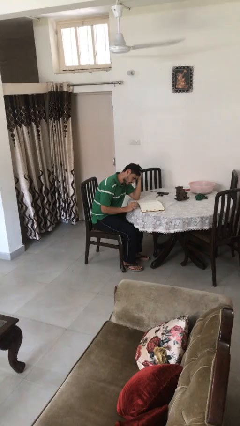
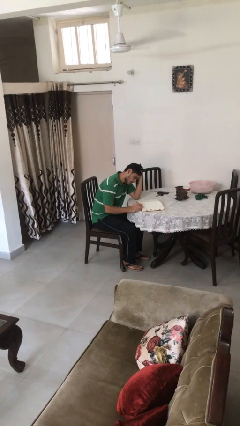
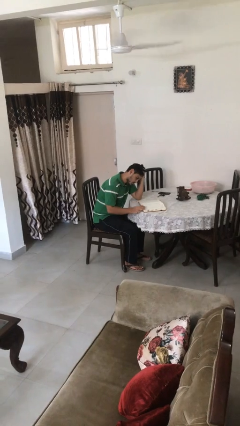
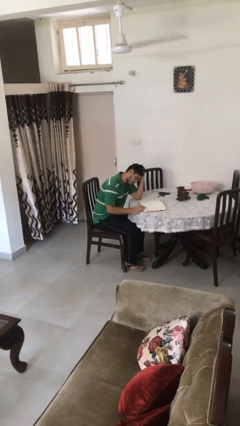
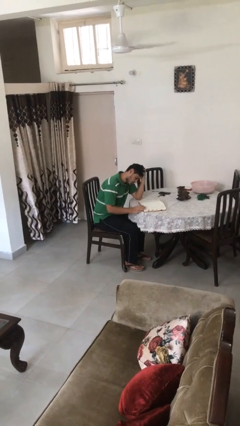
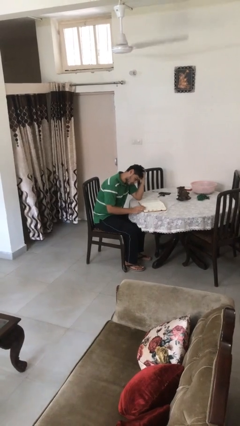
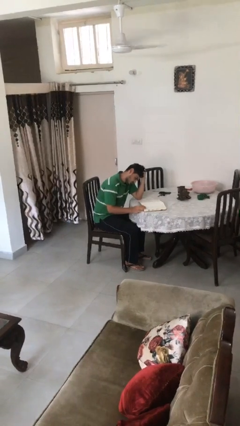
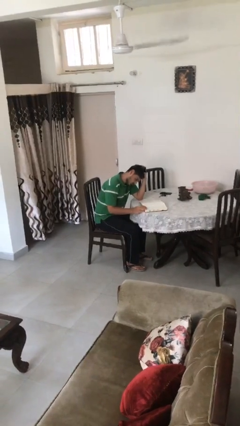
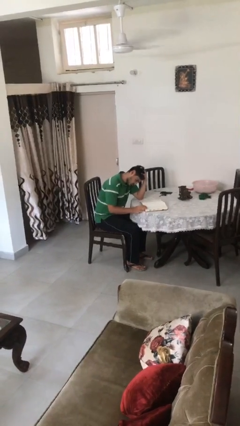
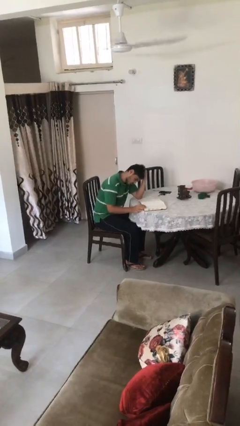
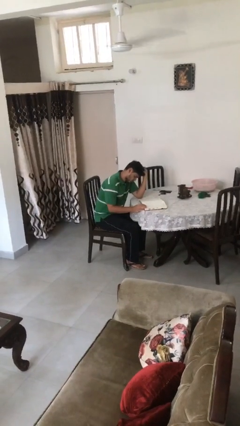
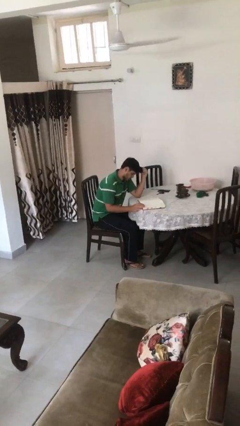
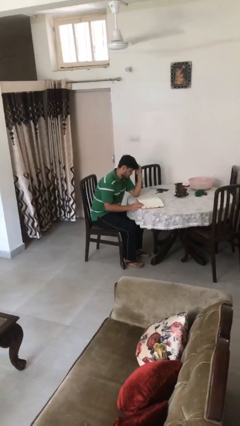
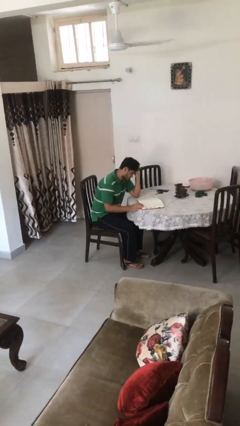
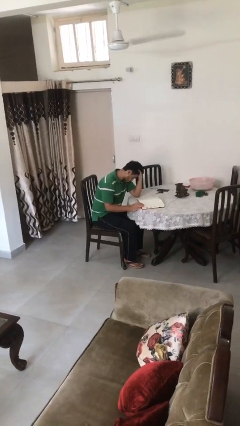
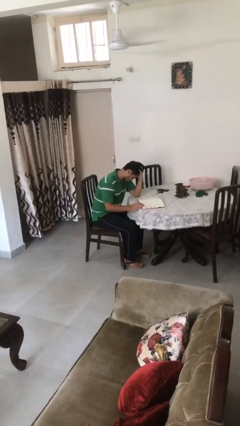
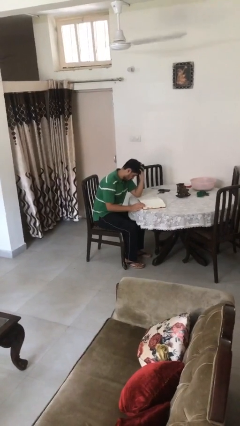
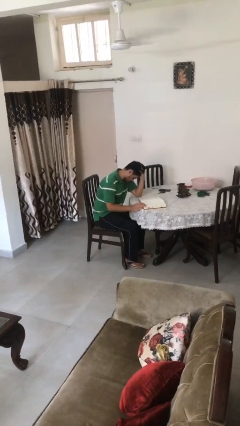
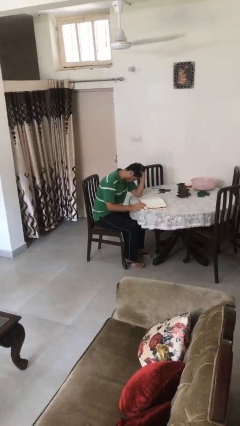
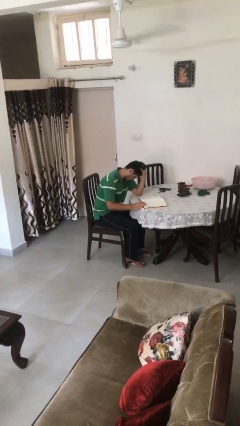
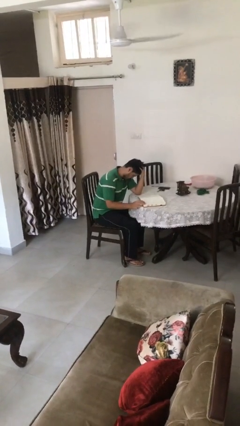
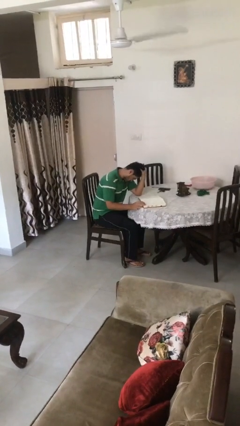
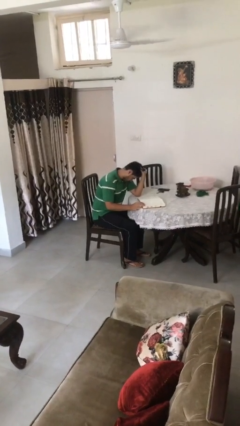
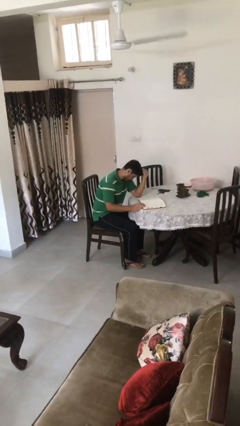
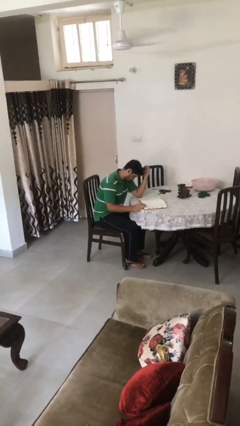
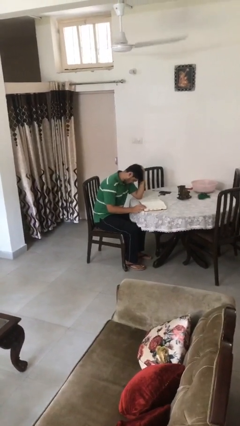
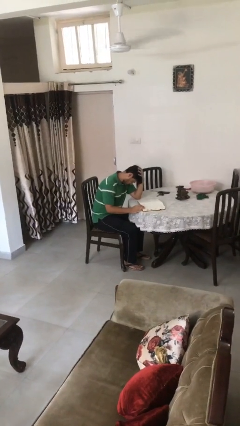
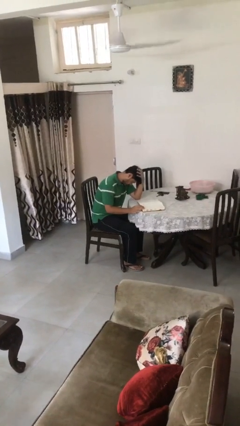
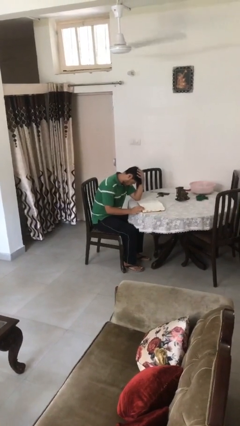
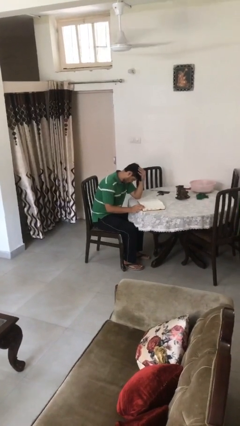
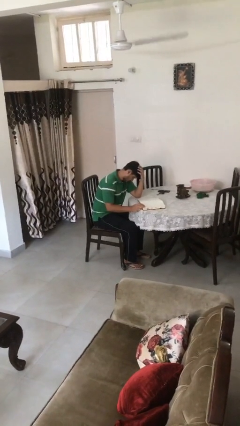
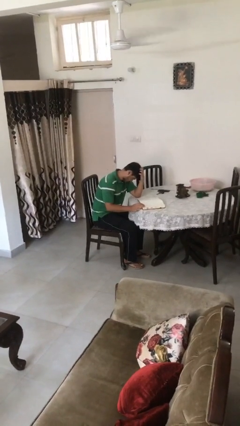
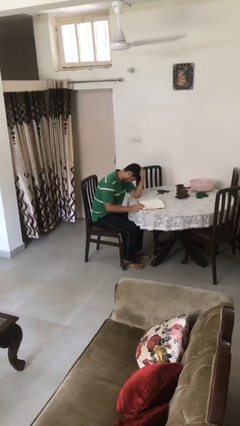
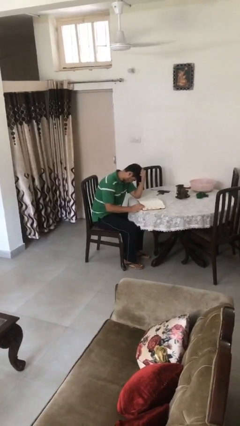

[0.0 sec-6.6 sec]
person reads document

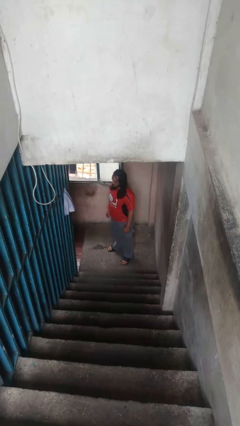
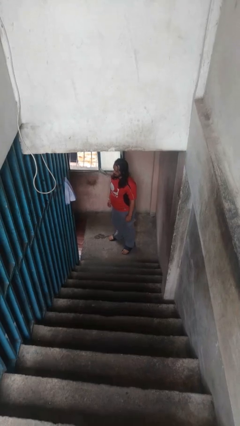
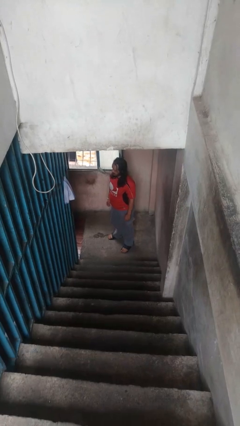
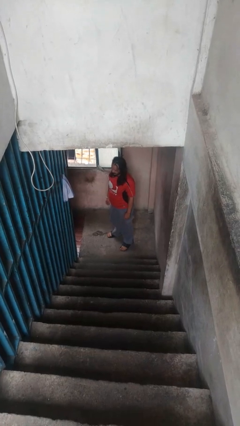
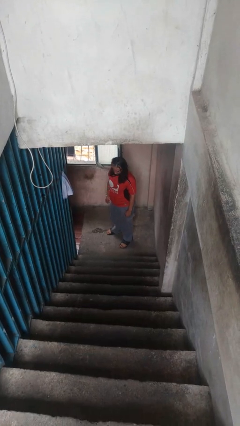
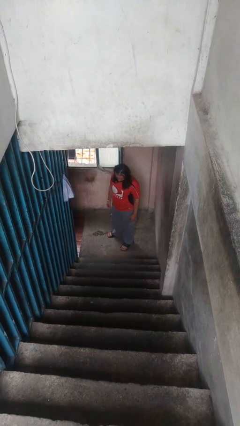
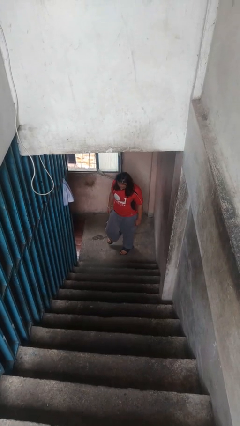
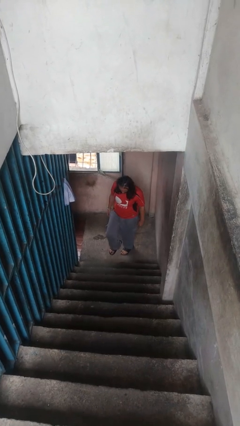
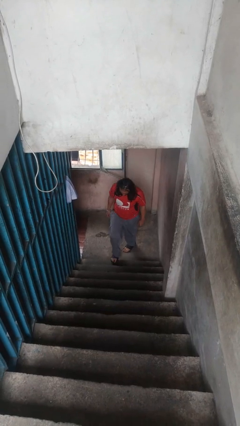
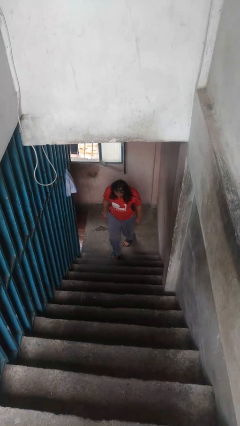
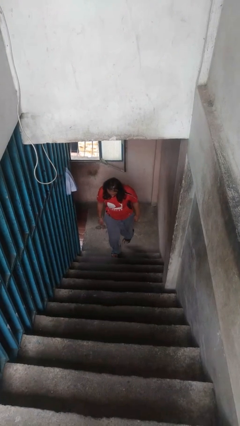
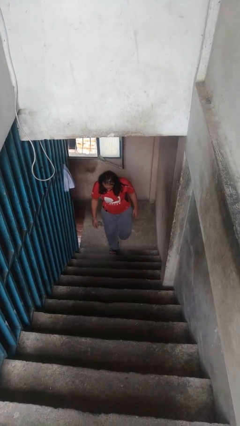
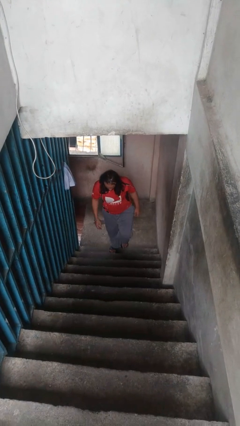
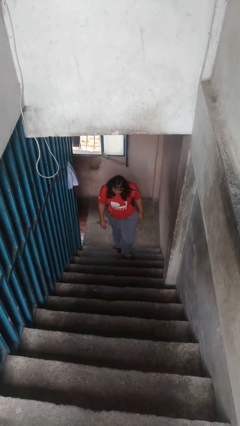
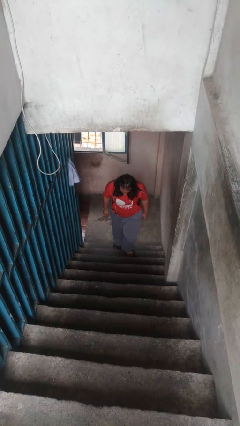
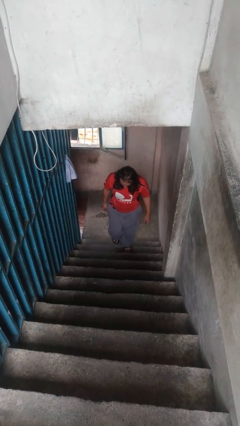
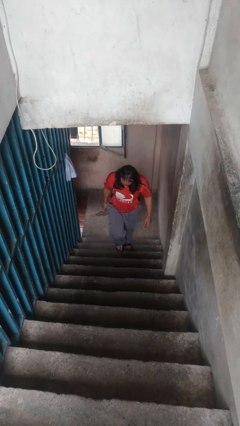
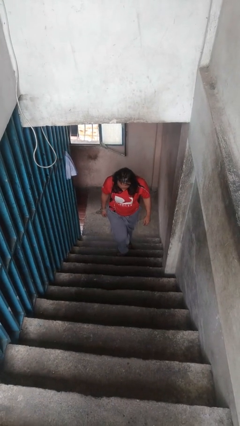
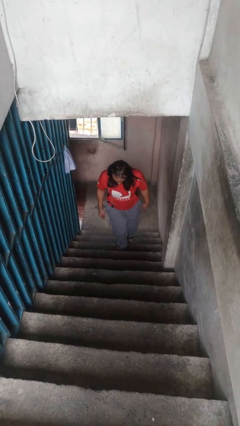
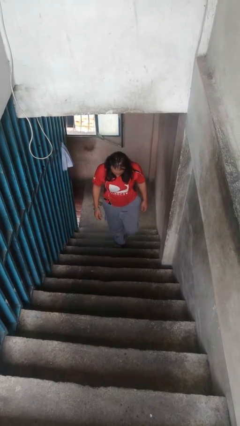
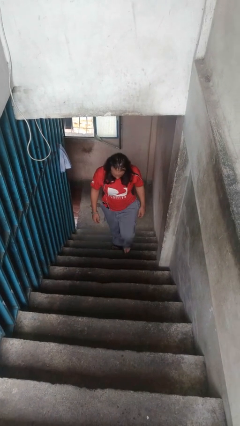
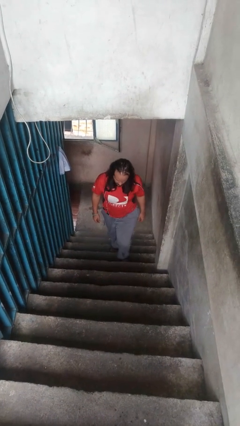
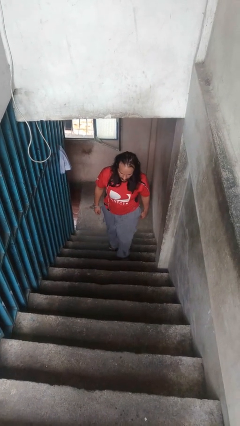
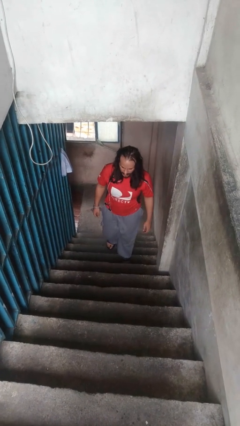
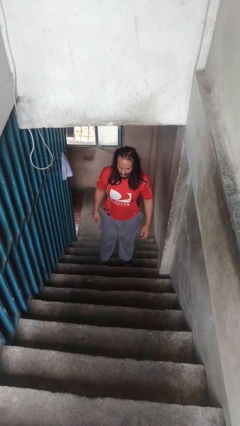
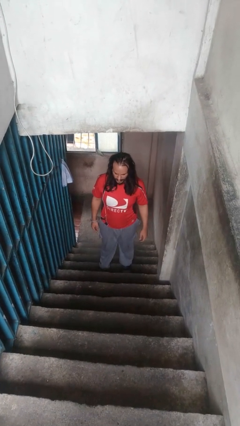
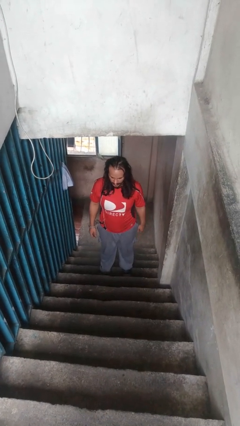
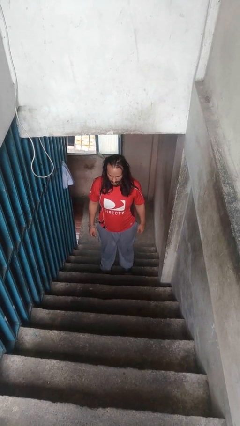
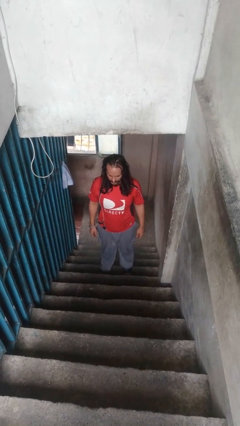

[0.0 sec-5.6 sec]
person climbs up stairs

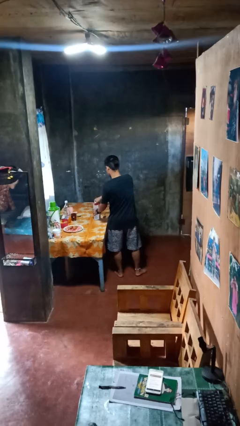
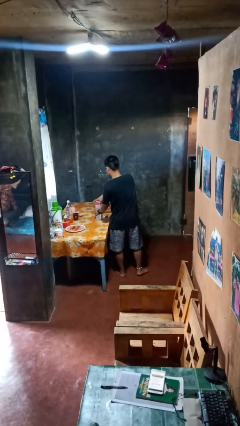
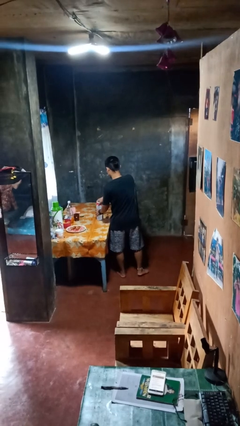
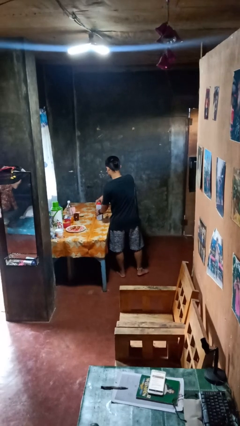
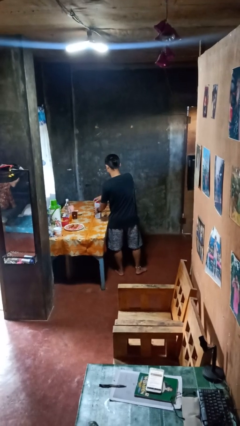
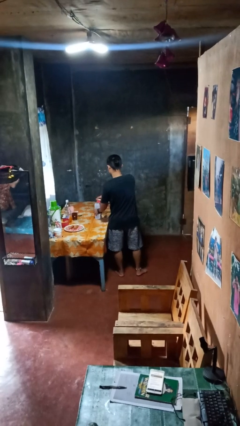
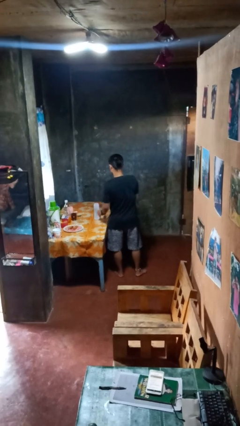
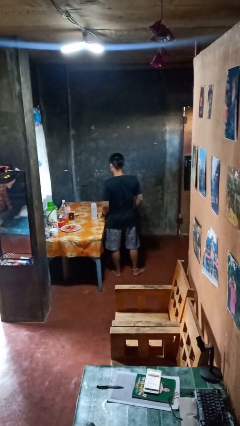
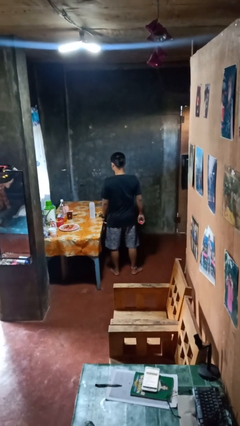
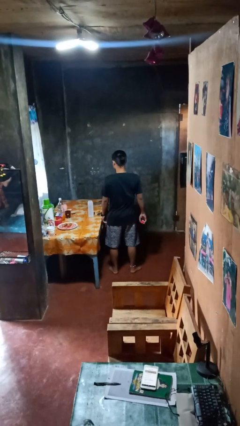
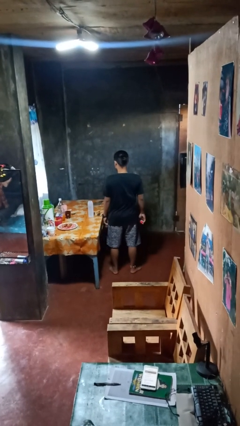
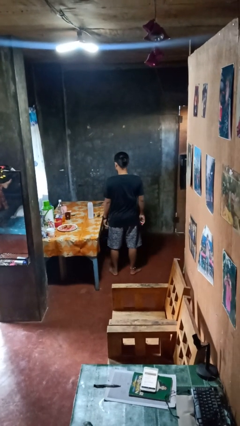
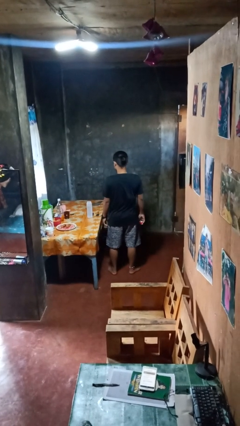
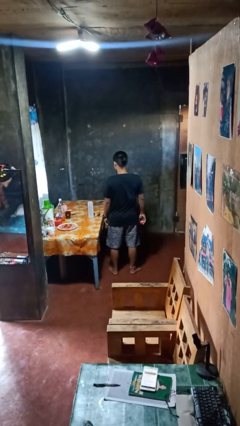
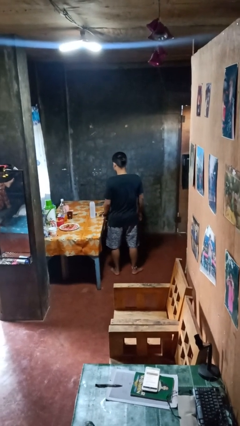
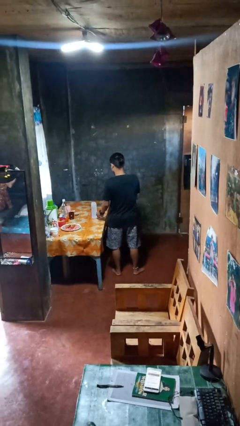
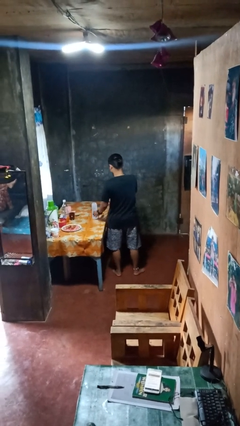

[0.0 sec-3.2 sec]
person opens jar

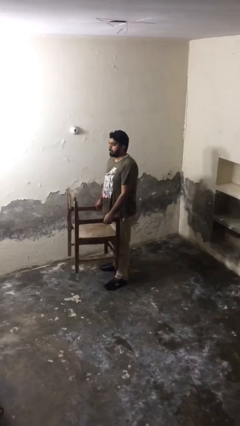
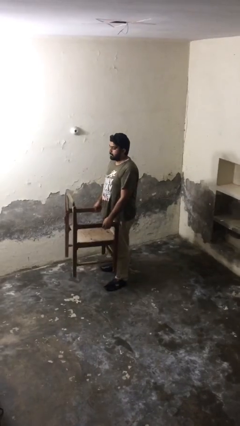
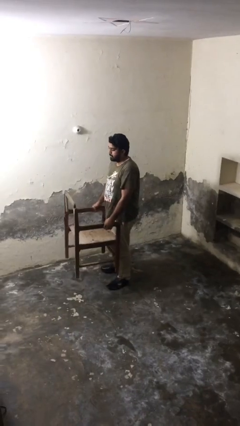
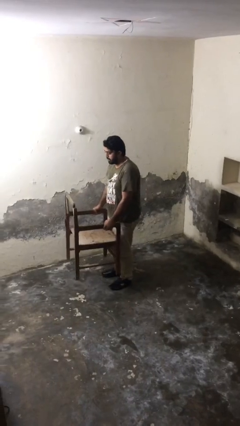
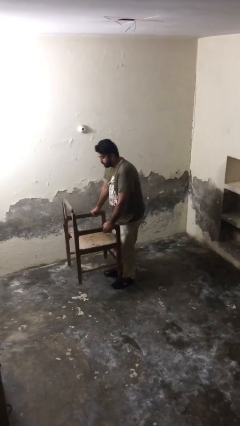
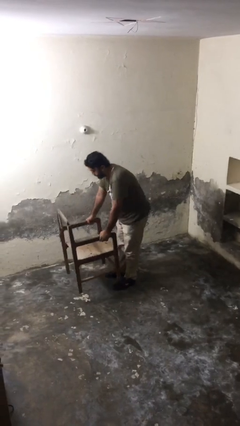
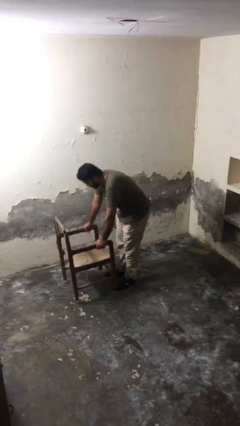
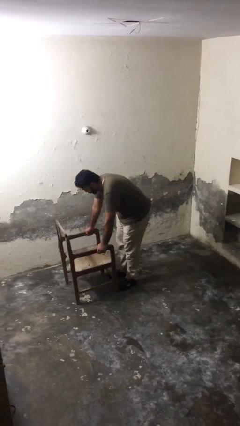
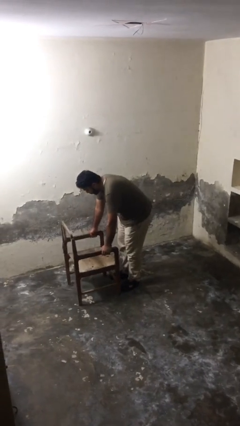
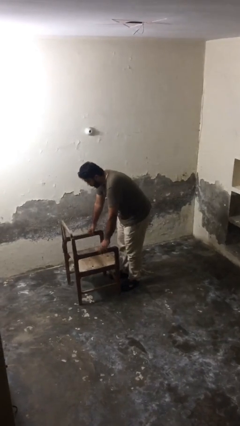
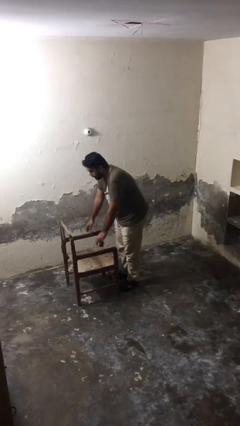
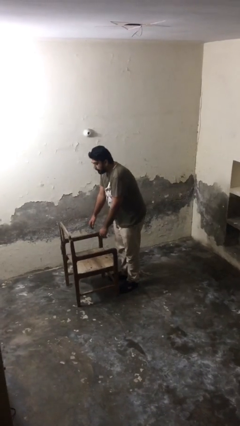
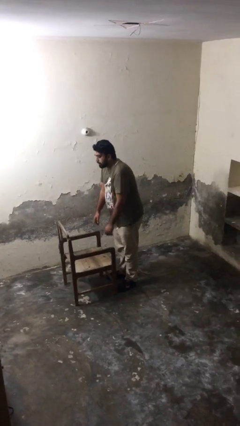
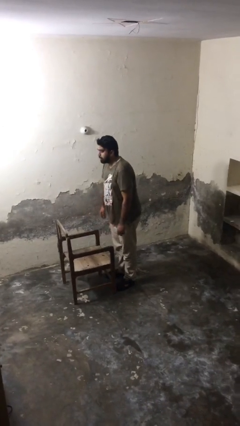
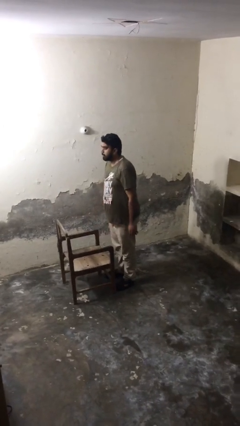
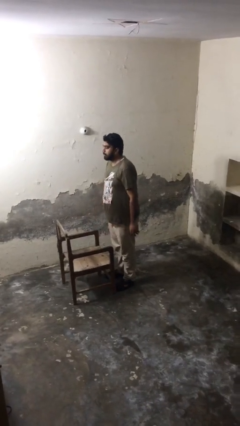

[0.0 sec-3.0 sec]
person puts down object on floor
